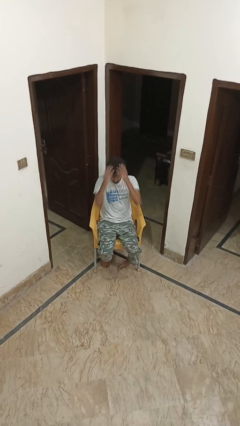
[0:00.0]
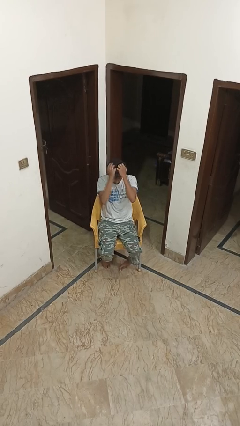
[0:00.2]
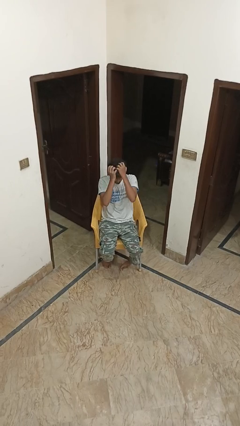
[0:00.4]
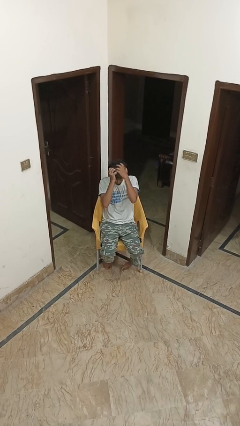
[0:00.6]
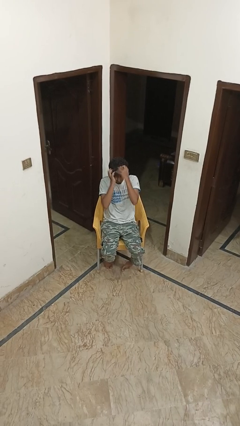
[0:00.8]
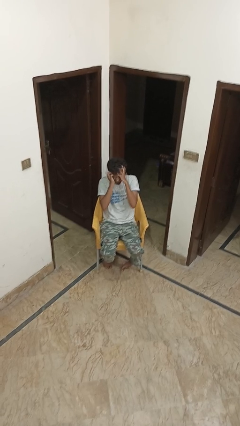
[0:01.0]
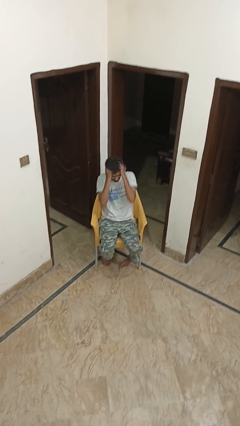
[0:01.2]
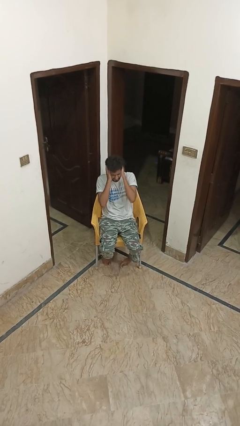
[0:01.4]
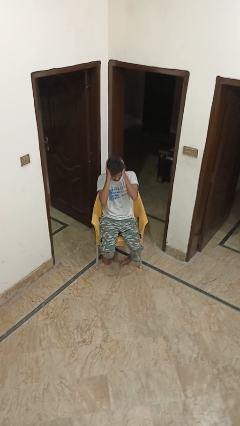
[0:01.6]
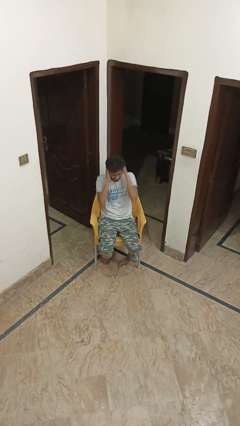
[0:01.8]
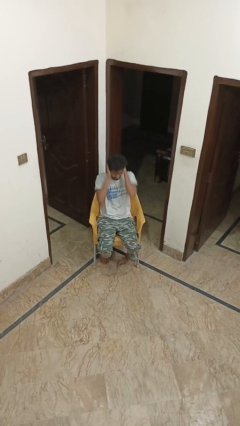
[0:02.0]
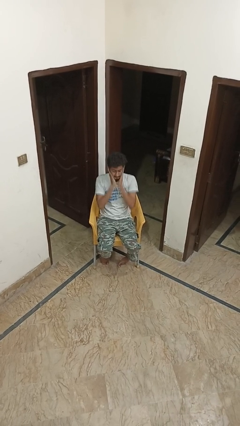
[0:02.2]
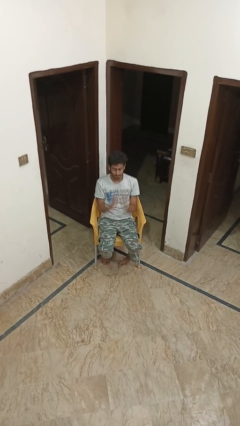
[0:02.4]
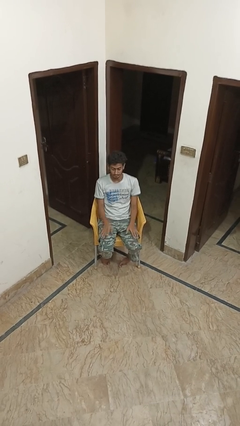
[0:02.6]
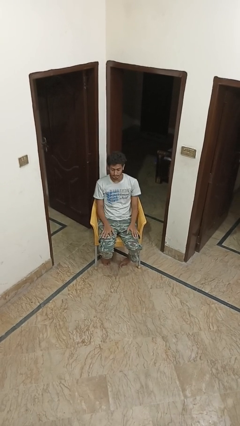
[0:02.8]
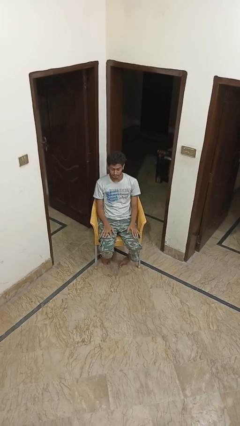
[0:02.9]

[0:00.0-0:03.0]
person scratches face

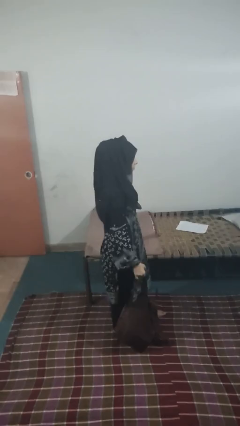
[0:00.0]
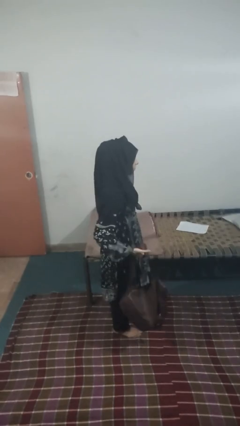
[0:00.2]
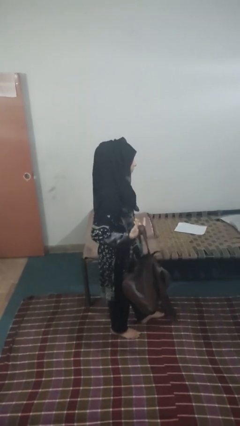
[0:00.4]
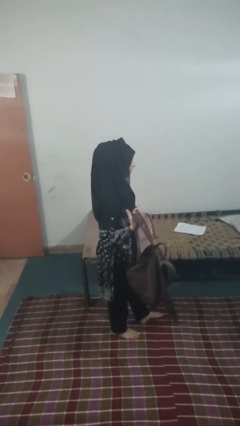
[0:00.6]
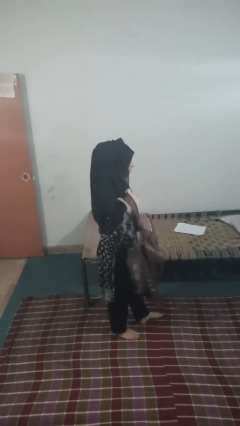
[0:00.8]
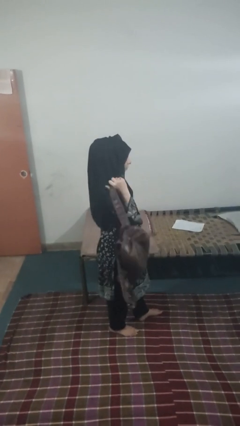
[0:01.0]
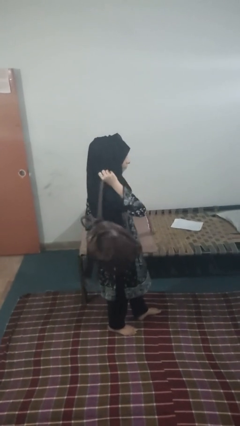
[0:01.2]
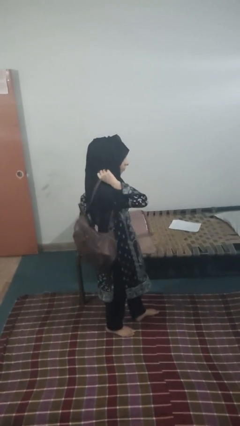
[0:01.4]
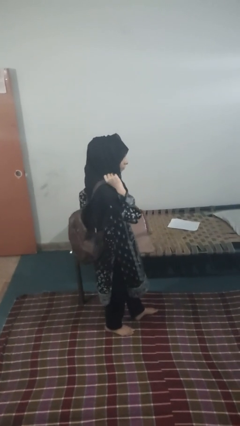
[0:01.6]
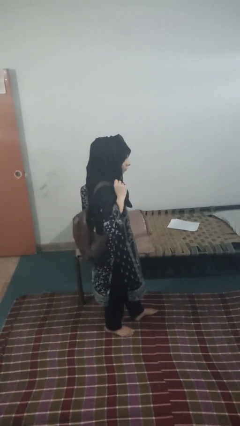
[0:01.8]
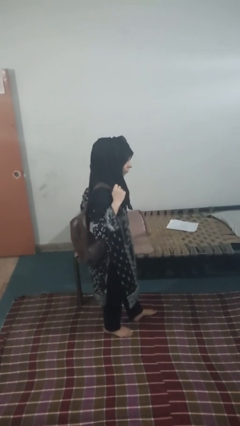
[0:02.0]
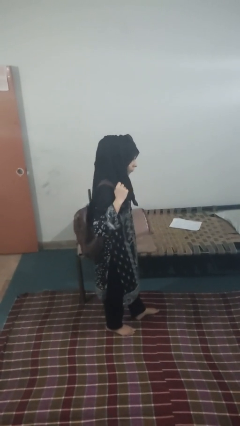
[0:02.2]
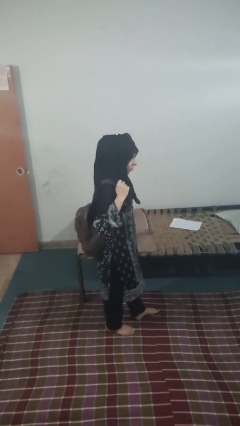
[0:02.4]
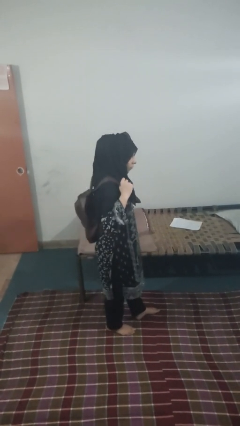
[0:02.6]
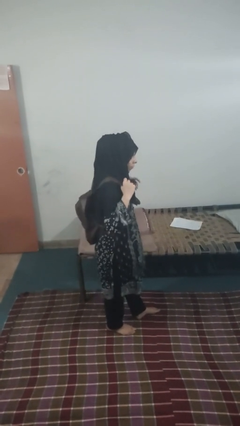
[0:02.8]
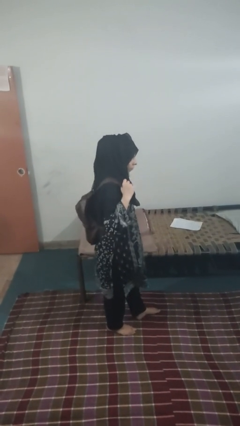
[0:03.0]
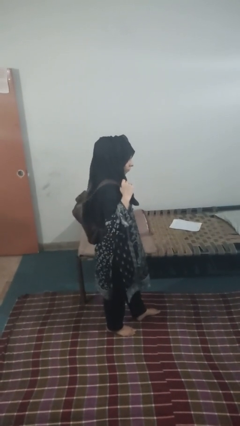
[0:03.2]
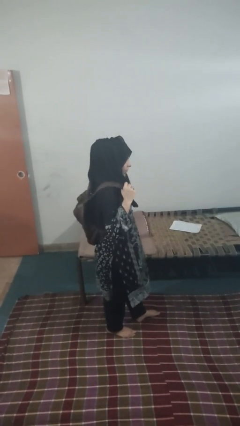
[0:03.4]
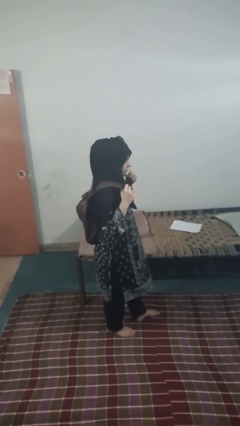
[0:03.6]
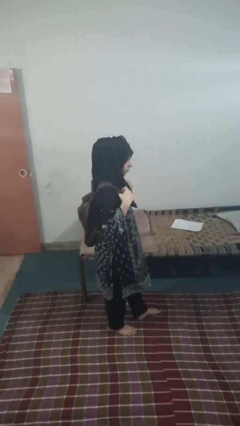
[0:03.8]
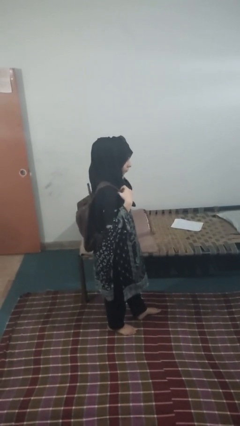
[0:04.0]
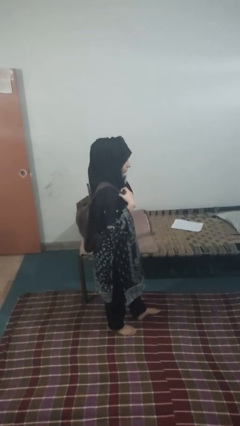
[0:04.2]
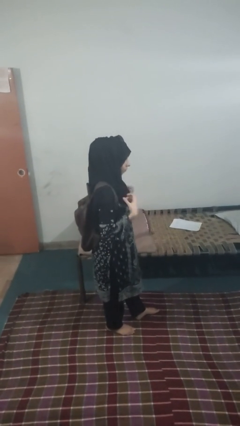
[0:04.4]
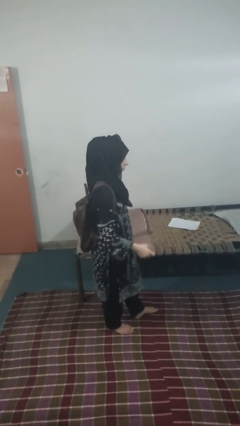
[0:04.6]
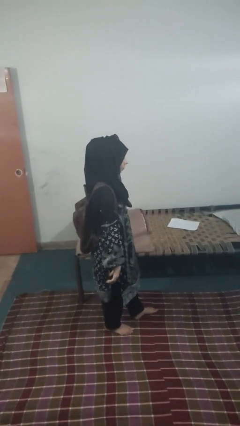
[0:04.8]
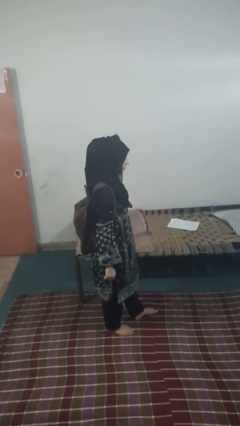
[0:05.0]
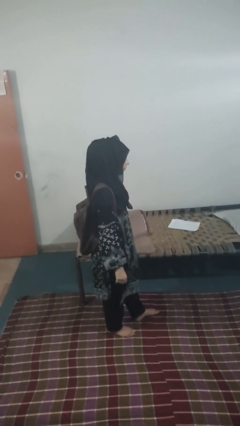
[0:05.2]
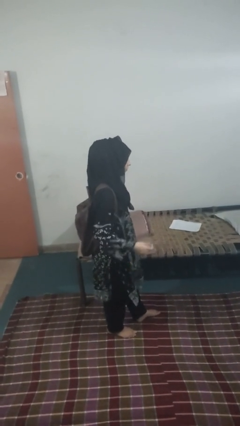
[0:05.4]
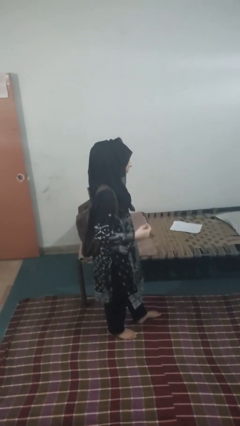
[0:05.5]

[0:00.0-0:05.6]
person puts on backpack

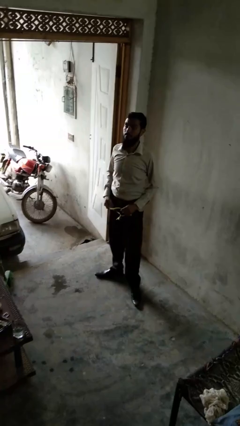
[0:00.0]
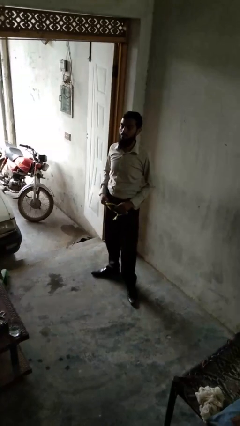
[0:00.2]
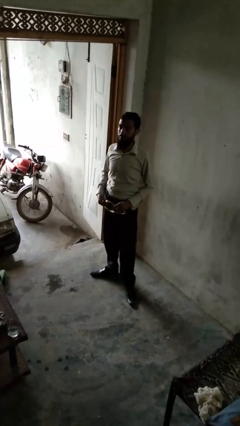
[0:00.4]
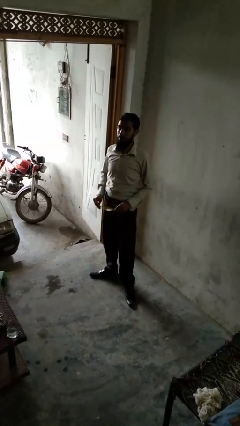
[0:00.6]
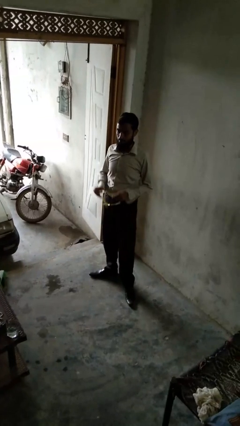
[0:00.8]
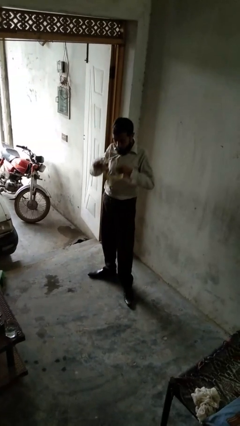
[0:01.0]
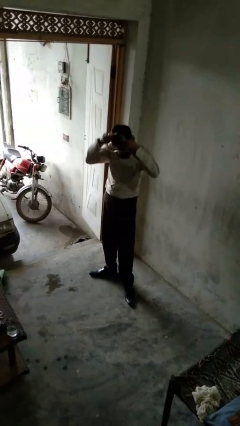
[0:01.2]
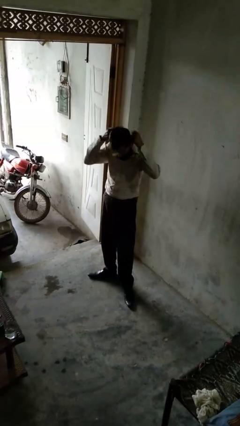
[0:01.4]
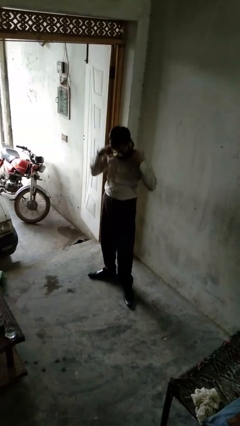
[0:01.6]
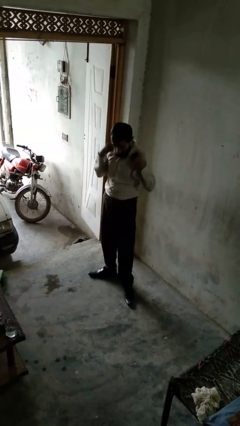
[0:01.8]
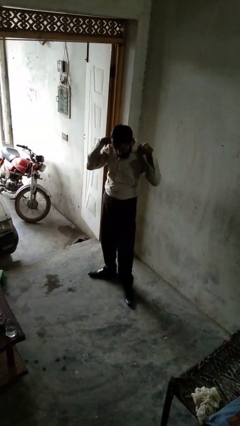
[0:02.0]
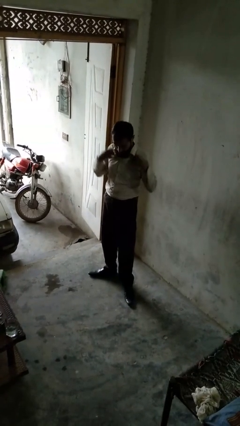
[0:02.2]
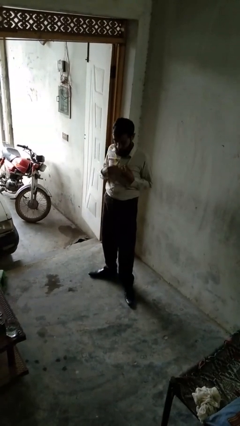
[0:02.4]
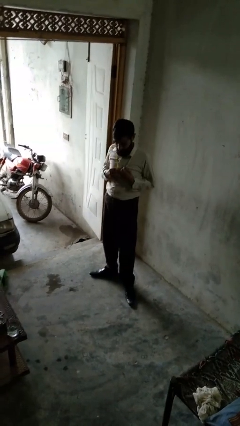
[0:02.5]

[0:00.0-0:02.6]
person puts on necklace

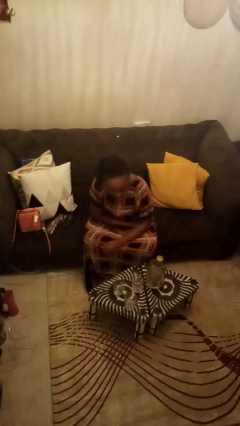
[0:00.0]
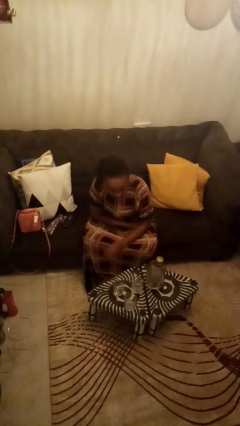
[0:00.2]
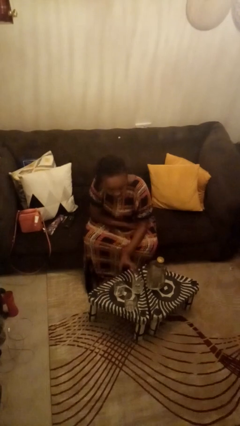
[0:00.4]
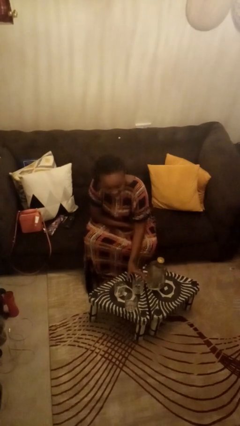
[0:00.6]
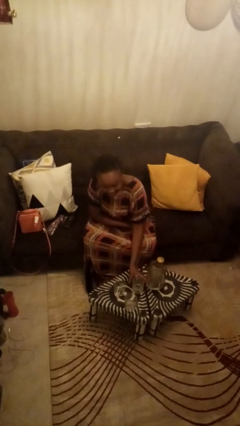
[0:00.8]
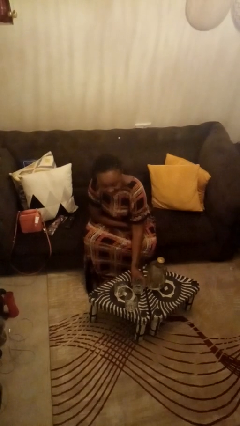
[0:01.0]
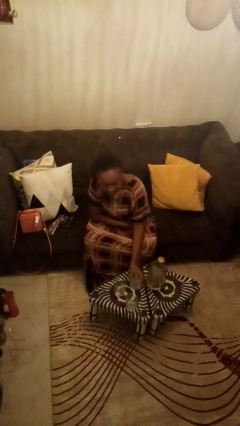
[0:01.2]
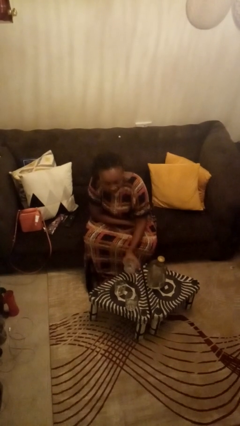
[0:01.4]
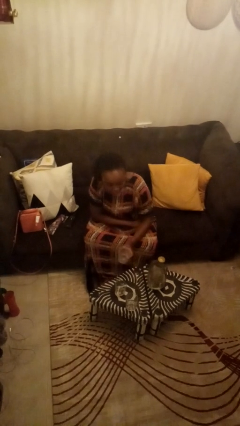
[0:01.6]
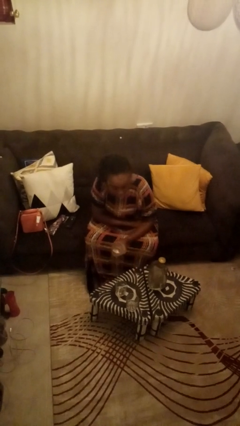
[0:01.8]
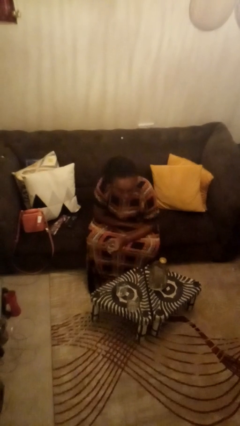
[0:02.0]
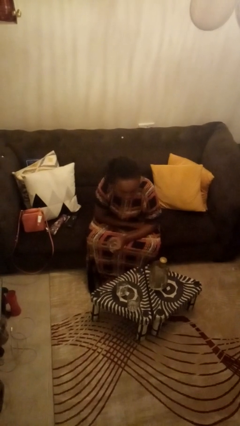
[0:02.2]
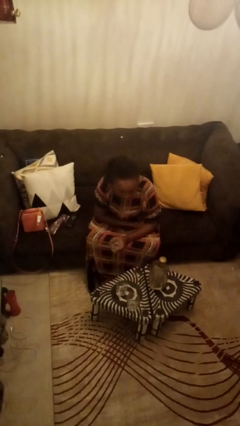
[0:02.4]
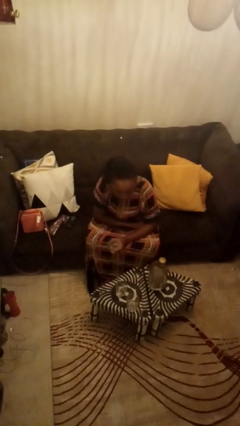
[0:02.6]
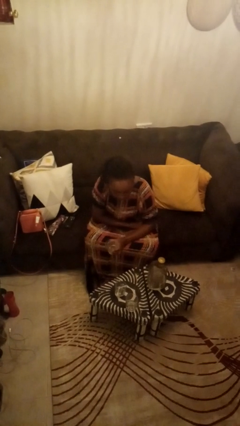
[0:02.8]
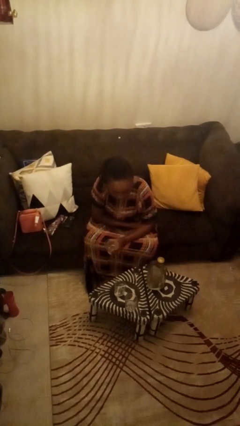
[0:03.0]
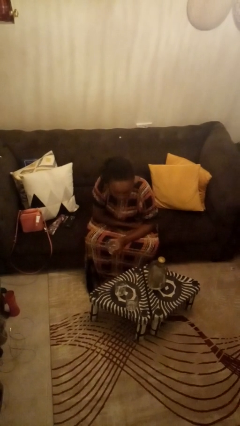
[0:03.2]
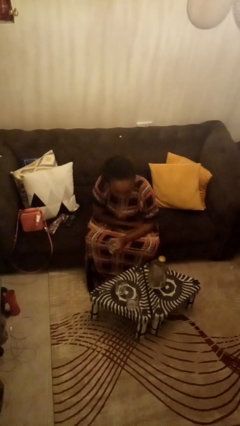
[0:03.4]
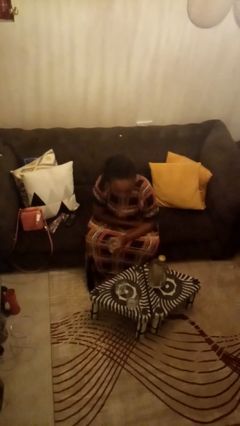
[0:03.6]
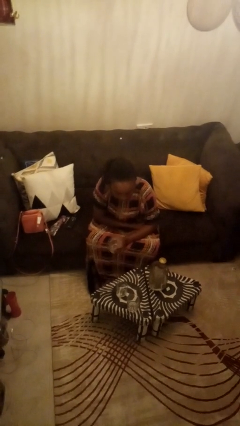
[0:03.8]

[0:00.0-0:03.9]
person picks up object from table

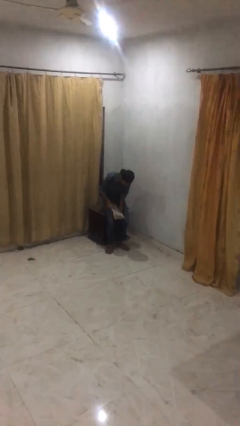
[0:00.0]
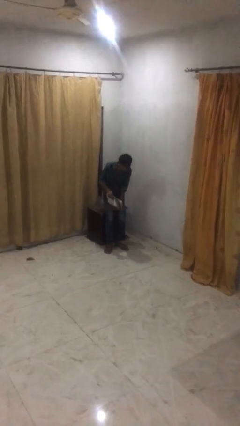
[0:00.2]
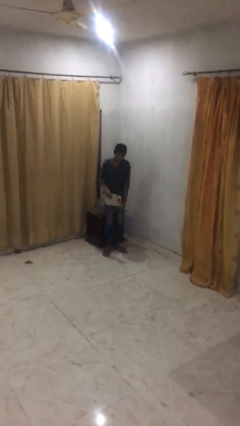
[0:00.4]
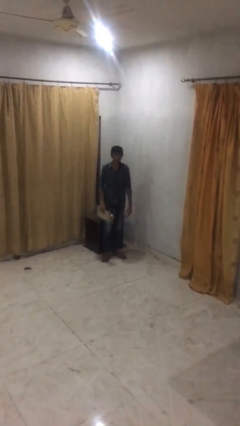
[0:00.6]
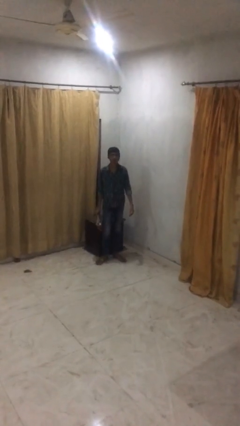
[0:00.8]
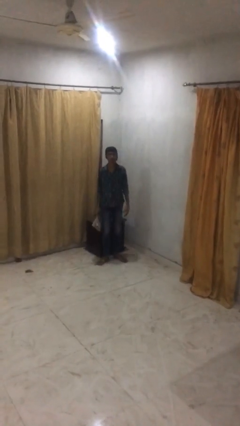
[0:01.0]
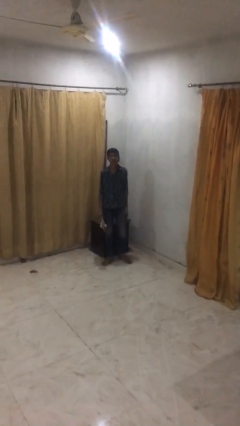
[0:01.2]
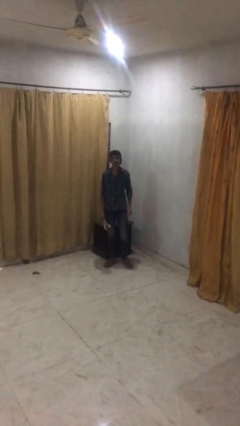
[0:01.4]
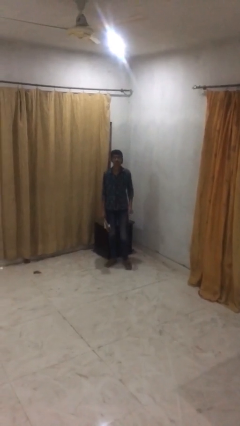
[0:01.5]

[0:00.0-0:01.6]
person stands up

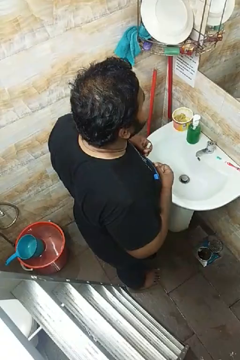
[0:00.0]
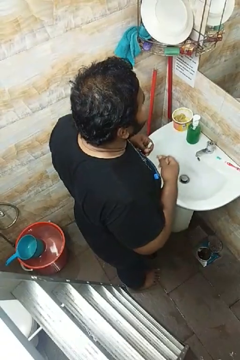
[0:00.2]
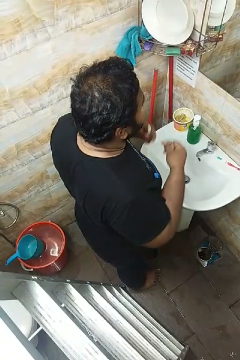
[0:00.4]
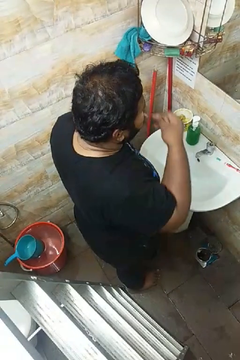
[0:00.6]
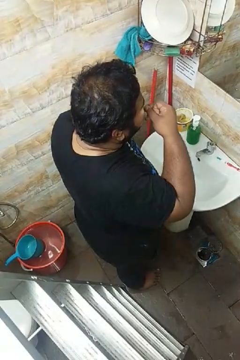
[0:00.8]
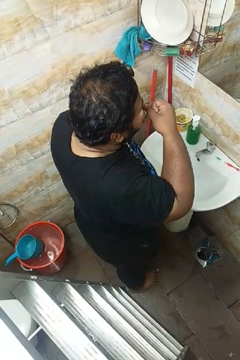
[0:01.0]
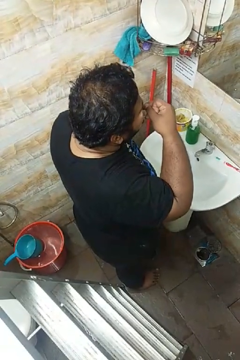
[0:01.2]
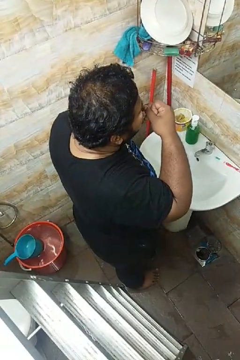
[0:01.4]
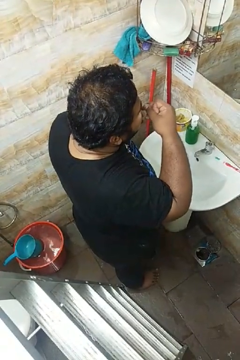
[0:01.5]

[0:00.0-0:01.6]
person flosses
